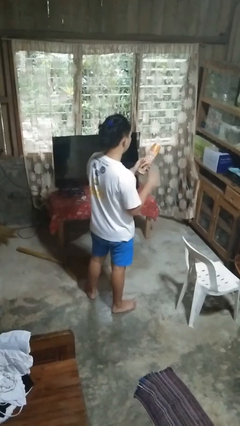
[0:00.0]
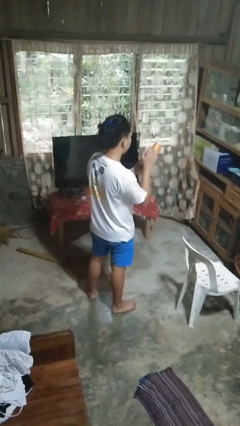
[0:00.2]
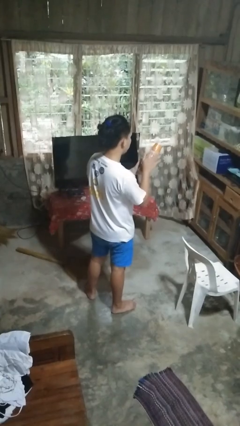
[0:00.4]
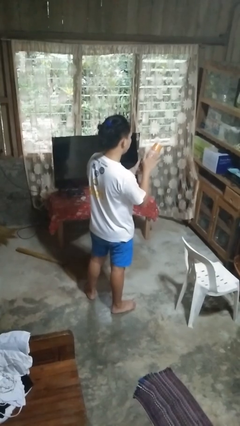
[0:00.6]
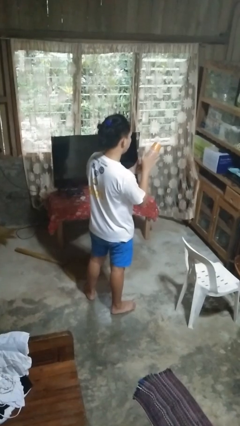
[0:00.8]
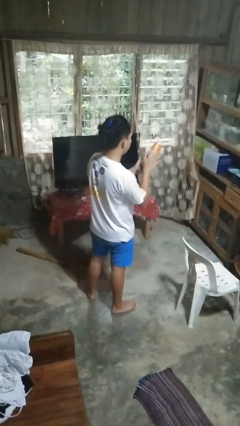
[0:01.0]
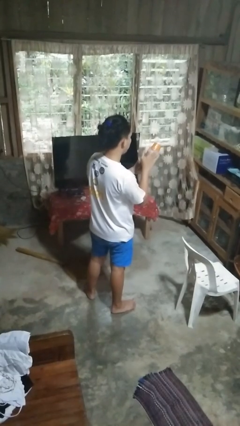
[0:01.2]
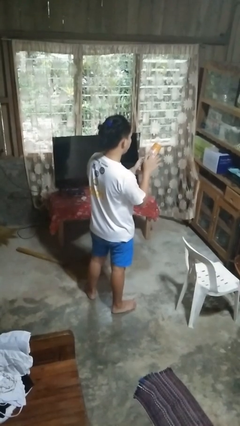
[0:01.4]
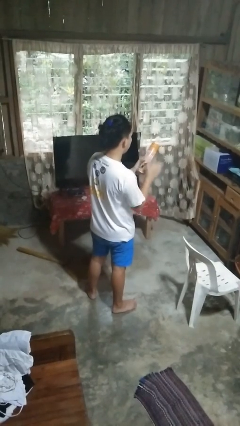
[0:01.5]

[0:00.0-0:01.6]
person taps object with finger

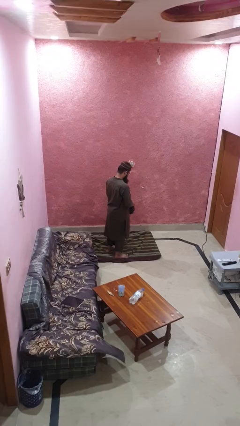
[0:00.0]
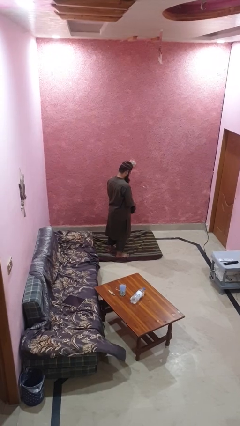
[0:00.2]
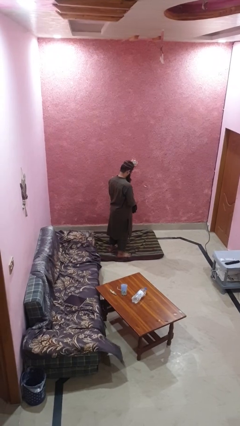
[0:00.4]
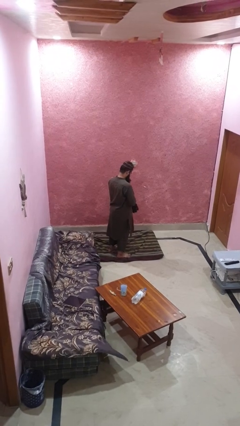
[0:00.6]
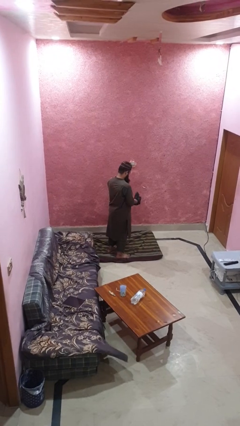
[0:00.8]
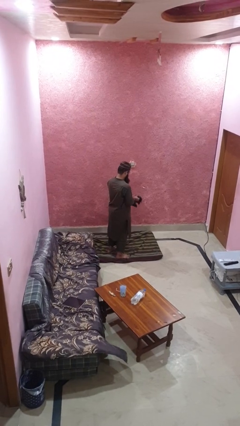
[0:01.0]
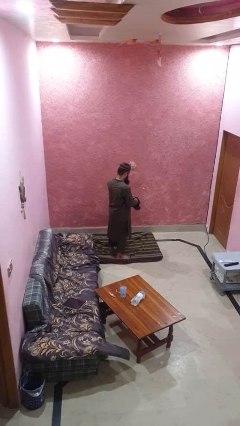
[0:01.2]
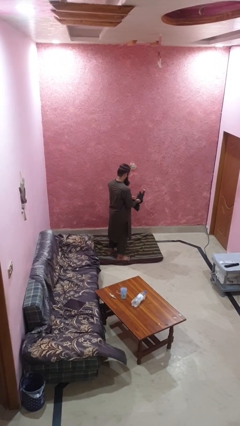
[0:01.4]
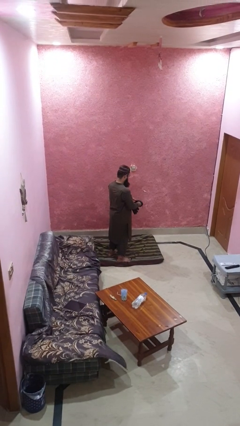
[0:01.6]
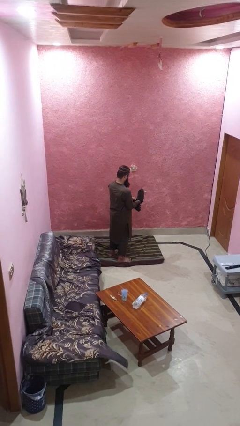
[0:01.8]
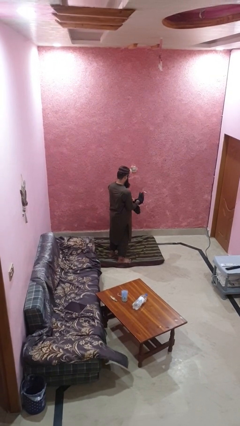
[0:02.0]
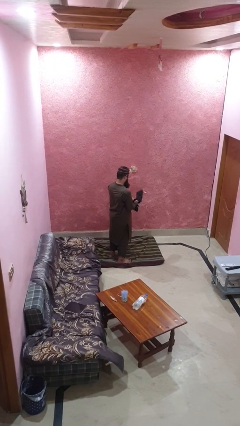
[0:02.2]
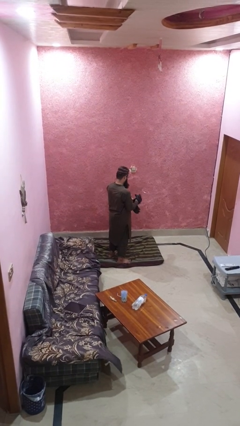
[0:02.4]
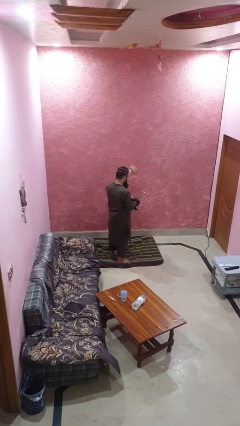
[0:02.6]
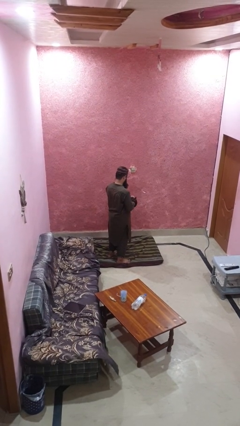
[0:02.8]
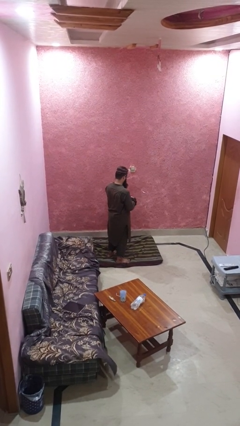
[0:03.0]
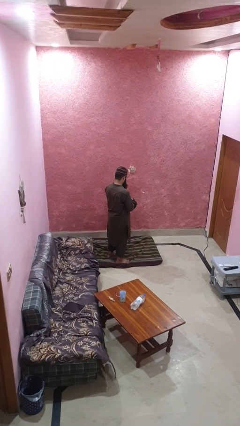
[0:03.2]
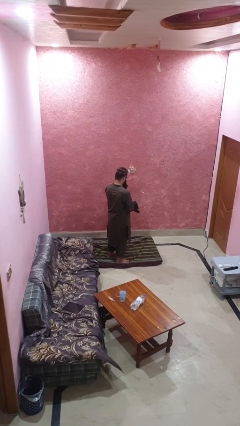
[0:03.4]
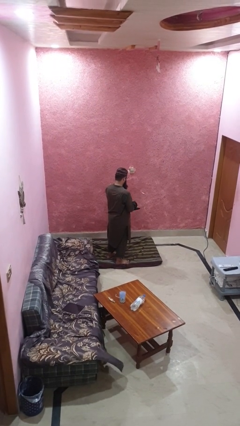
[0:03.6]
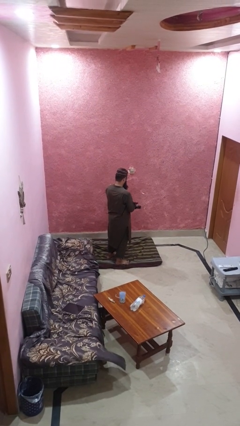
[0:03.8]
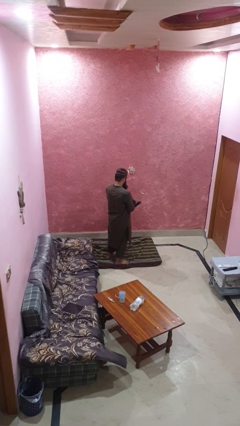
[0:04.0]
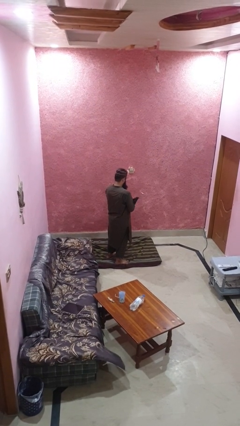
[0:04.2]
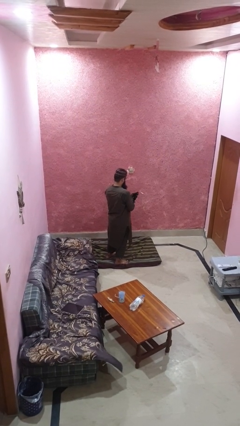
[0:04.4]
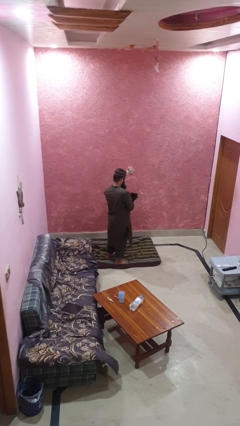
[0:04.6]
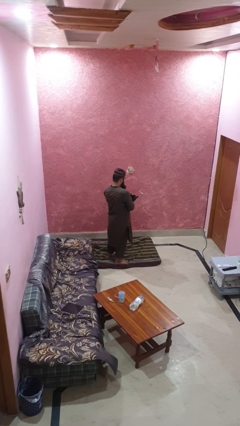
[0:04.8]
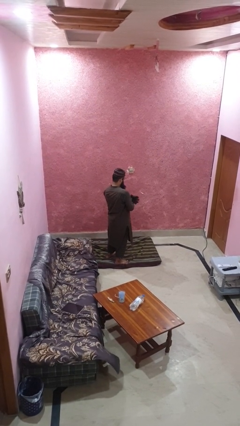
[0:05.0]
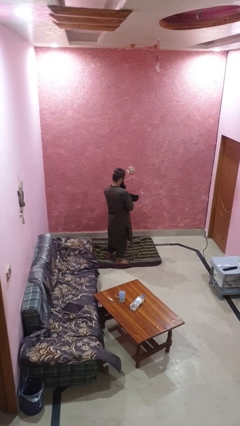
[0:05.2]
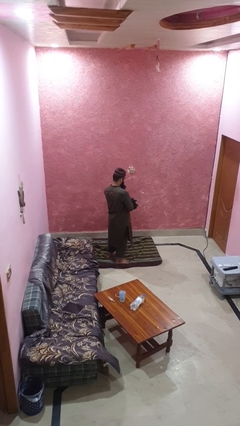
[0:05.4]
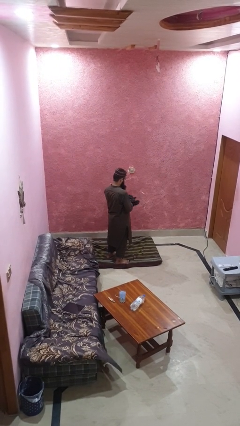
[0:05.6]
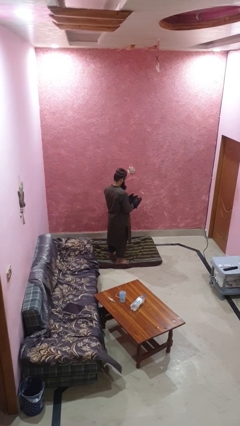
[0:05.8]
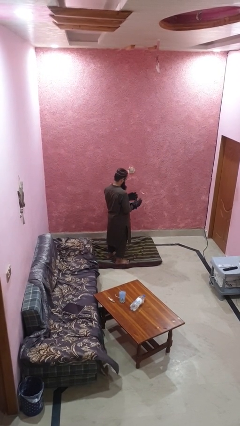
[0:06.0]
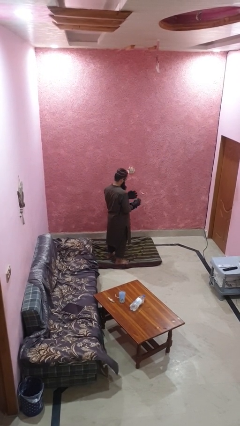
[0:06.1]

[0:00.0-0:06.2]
person puts on gloves

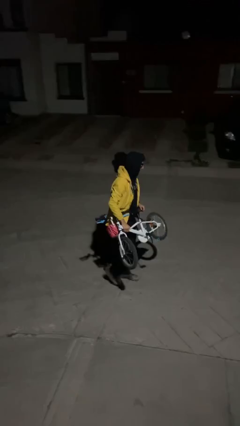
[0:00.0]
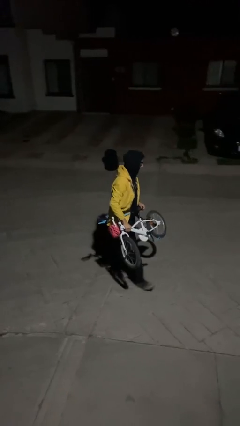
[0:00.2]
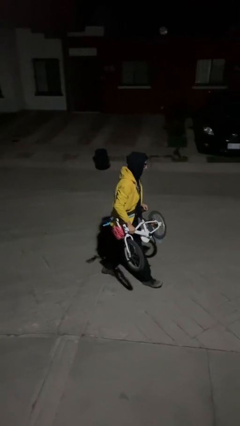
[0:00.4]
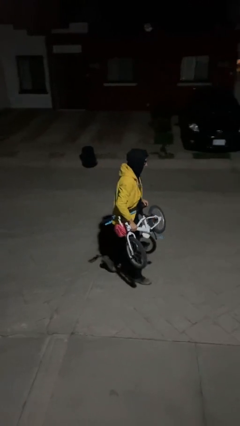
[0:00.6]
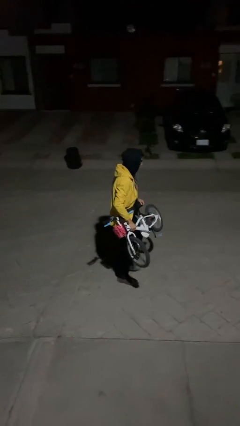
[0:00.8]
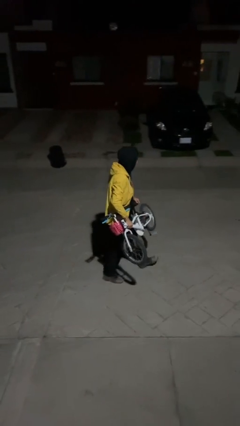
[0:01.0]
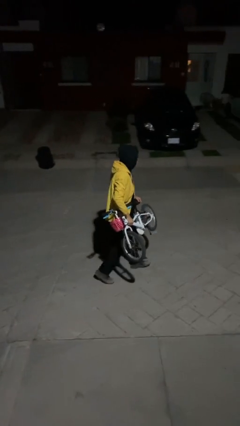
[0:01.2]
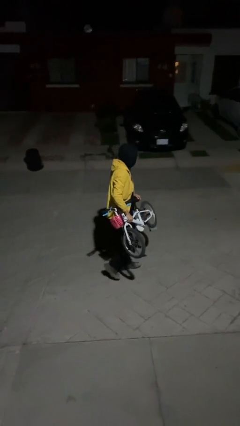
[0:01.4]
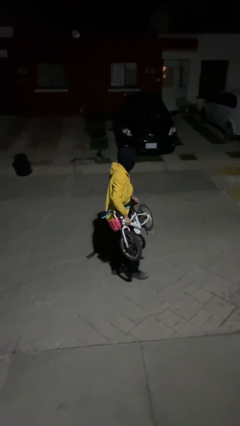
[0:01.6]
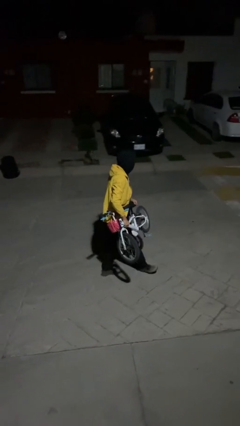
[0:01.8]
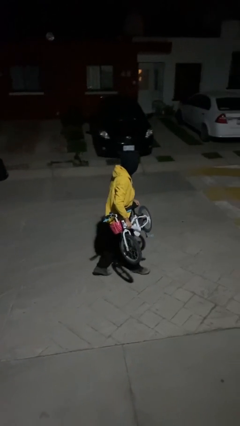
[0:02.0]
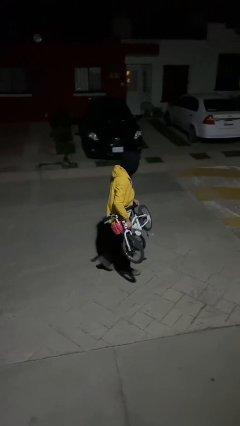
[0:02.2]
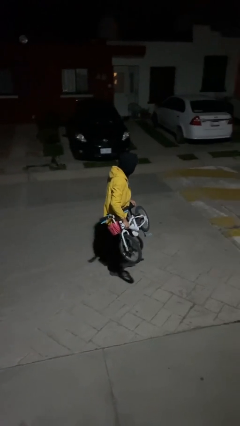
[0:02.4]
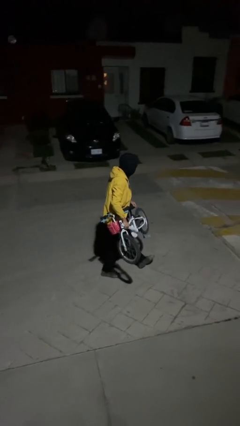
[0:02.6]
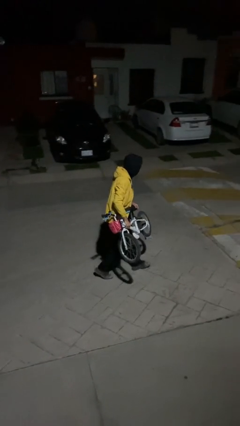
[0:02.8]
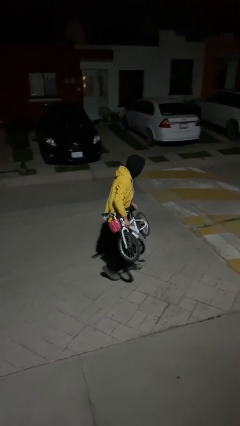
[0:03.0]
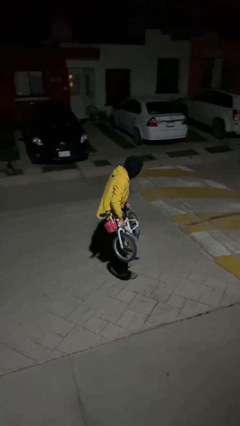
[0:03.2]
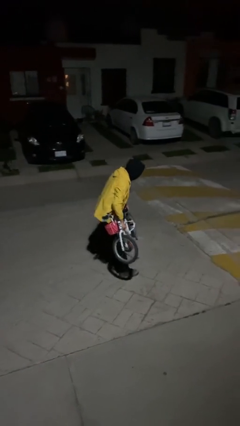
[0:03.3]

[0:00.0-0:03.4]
person carries heavy object

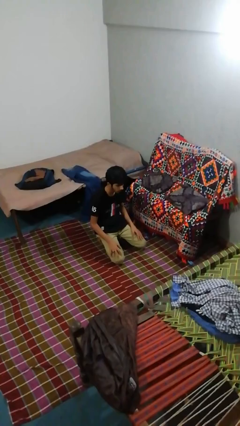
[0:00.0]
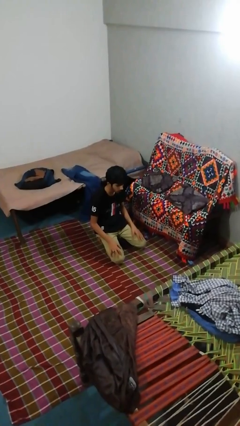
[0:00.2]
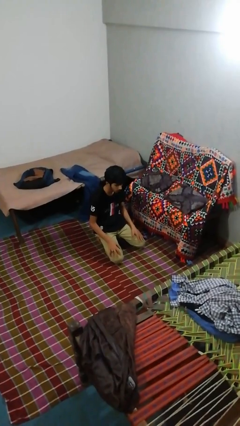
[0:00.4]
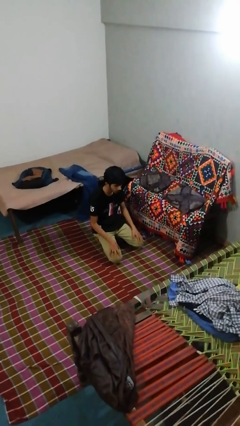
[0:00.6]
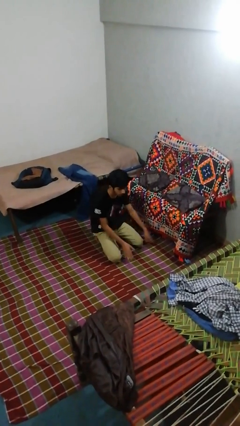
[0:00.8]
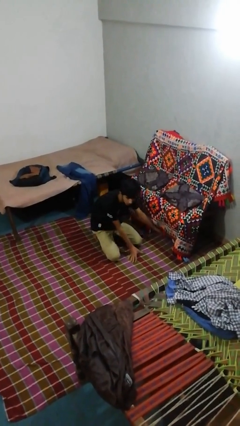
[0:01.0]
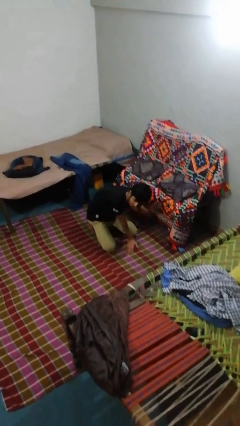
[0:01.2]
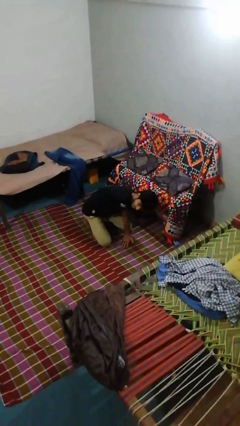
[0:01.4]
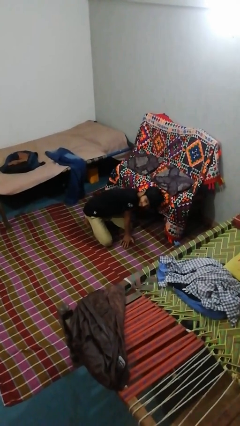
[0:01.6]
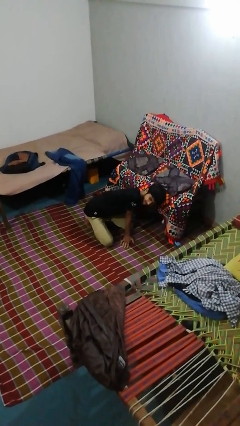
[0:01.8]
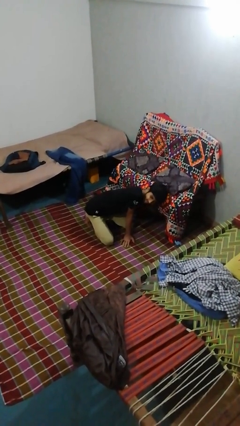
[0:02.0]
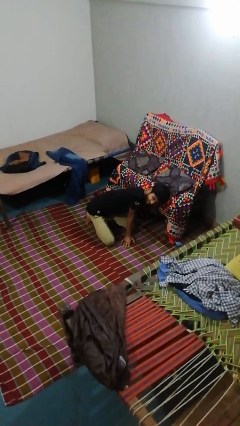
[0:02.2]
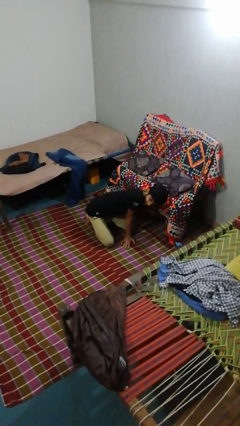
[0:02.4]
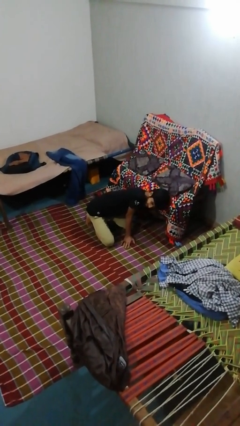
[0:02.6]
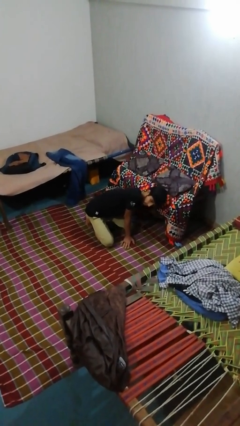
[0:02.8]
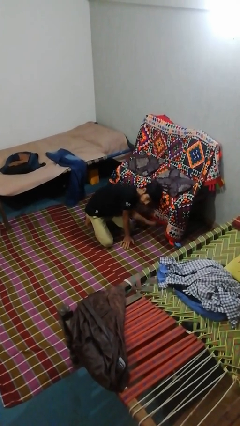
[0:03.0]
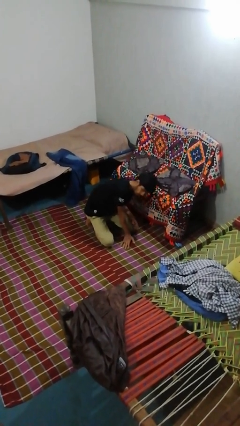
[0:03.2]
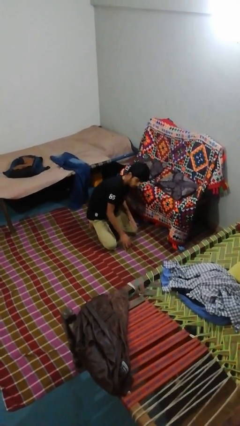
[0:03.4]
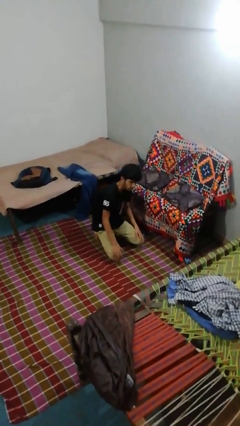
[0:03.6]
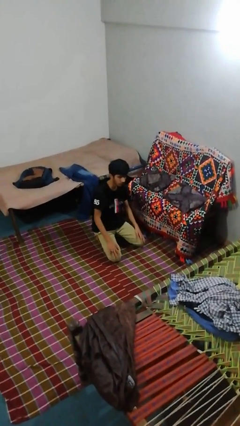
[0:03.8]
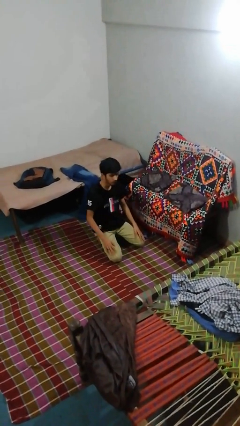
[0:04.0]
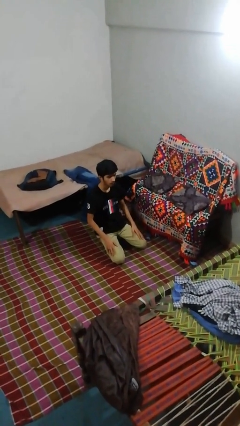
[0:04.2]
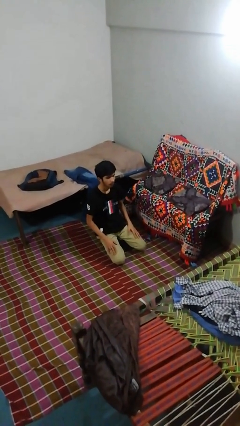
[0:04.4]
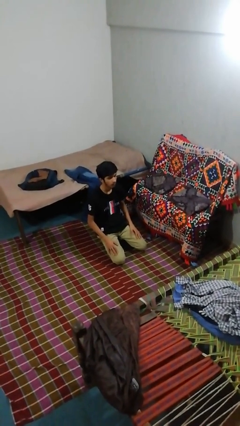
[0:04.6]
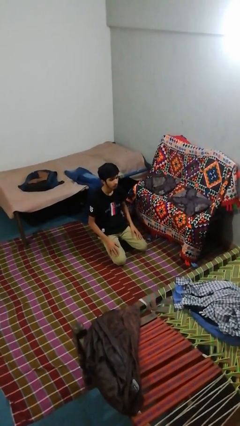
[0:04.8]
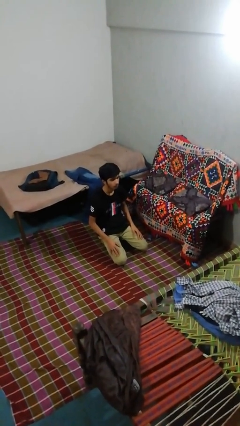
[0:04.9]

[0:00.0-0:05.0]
person searches under couch

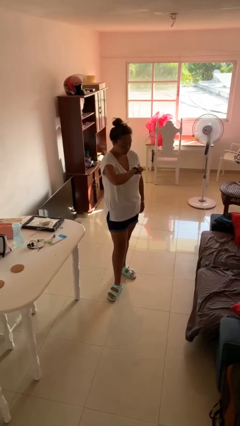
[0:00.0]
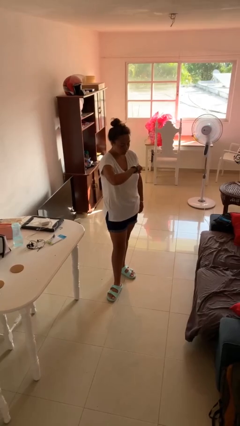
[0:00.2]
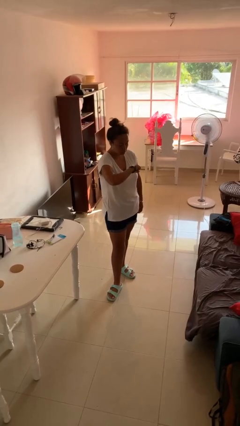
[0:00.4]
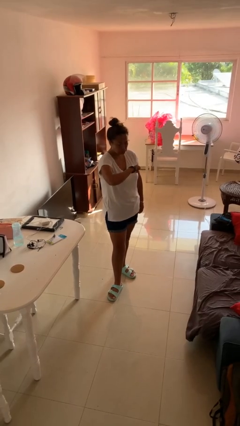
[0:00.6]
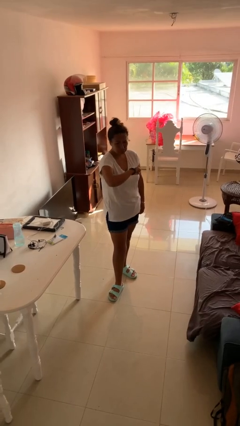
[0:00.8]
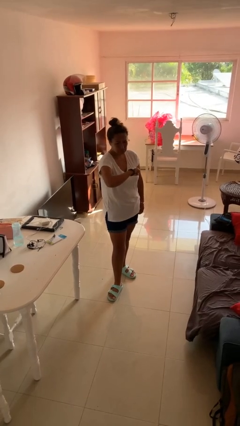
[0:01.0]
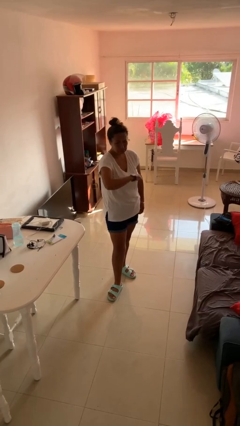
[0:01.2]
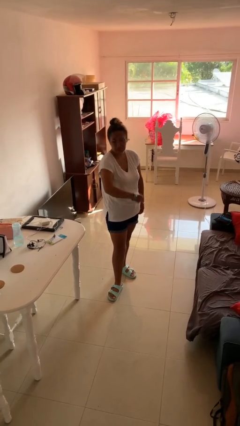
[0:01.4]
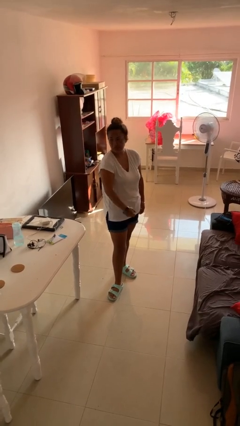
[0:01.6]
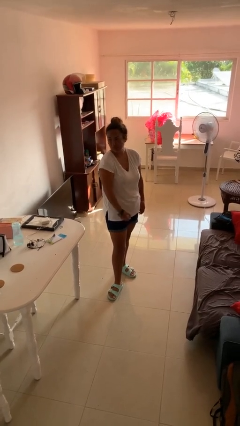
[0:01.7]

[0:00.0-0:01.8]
person looks at wristwatch

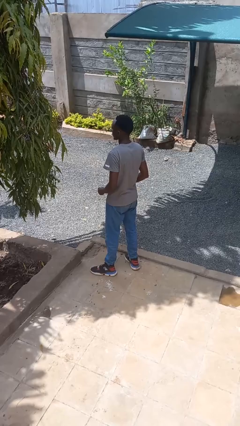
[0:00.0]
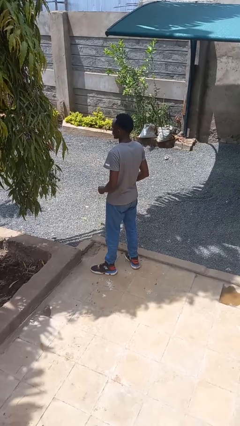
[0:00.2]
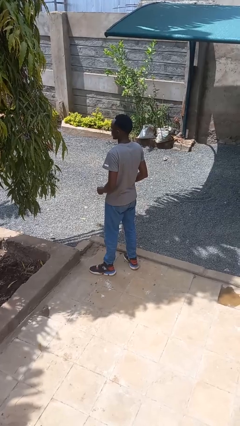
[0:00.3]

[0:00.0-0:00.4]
person puts on facemask
